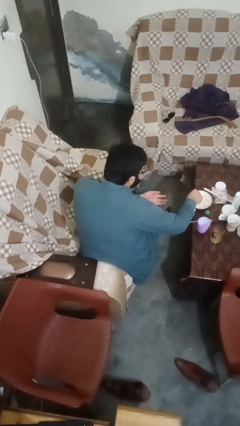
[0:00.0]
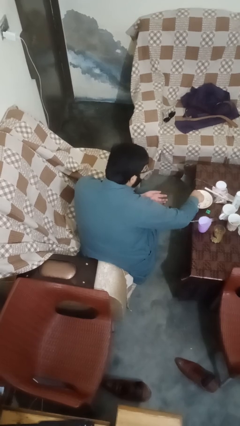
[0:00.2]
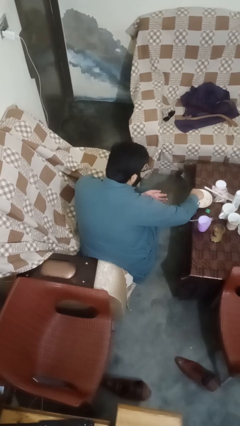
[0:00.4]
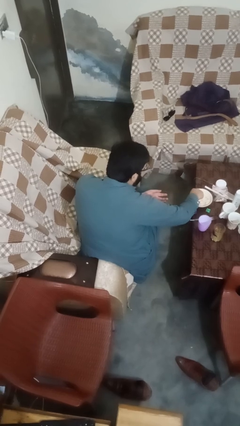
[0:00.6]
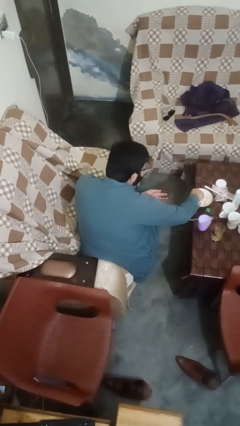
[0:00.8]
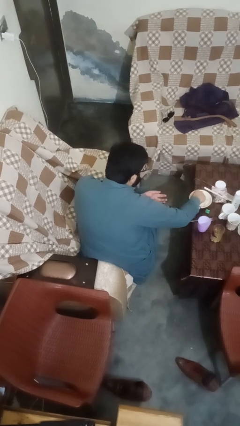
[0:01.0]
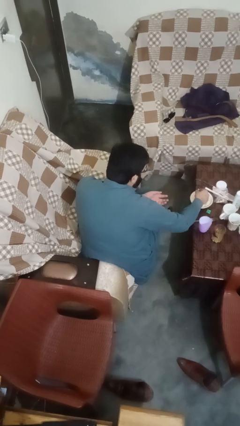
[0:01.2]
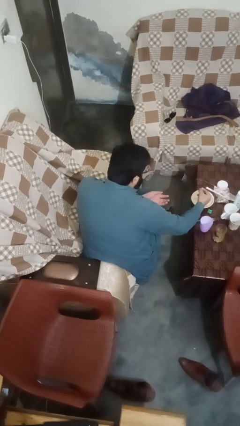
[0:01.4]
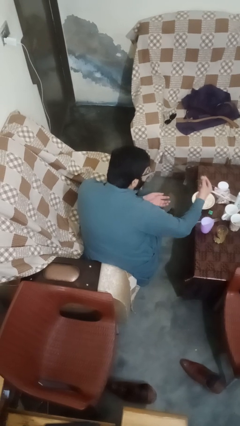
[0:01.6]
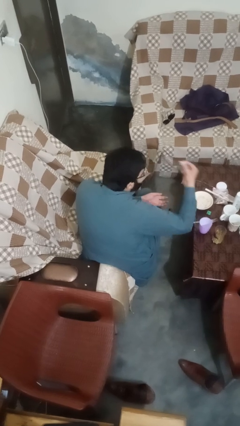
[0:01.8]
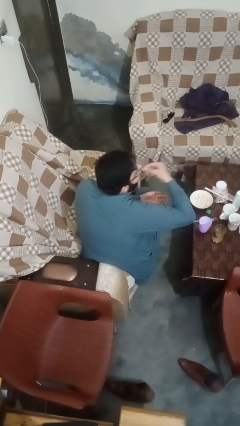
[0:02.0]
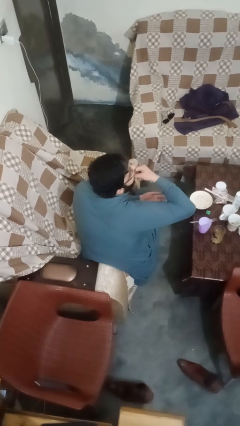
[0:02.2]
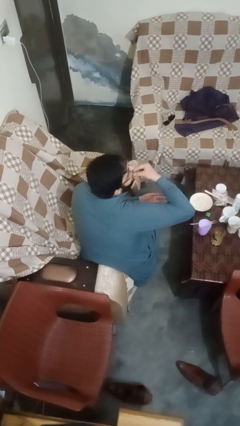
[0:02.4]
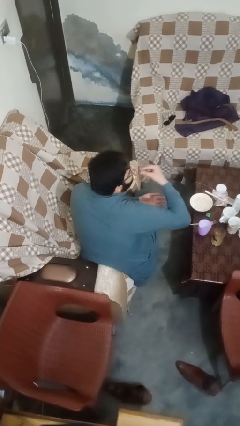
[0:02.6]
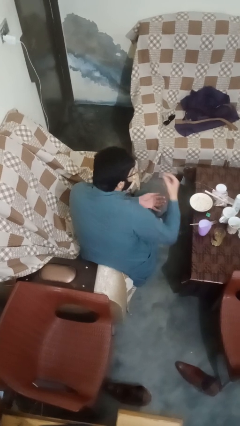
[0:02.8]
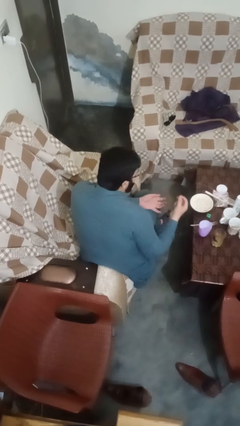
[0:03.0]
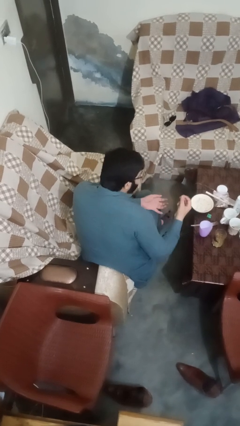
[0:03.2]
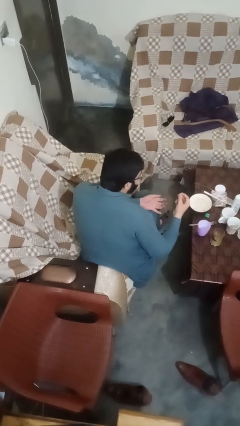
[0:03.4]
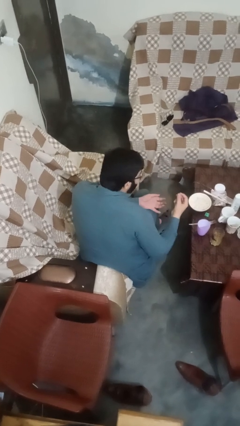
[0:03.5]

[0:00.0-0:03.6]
person eats with hands

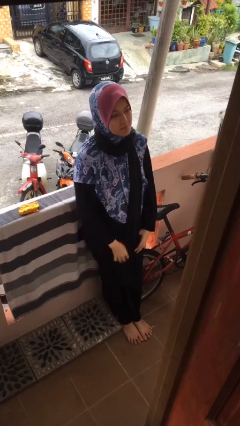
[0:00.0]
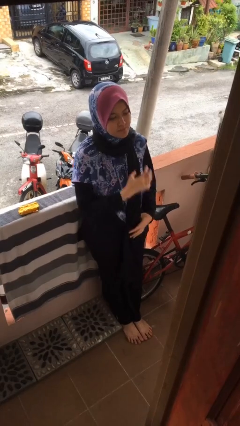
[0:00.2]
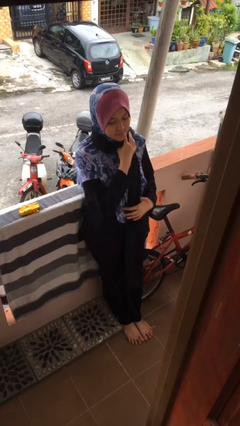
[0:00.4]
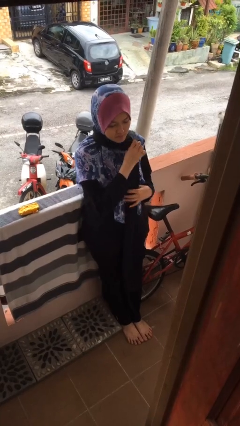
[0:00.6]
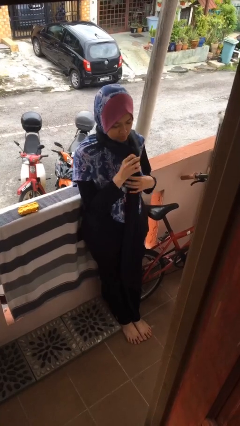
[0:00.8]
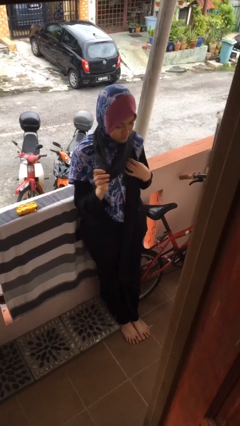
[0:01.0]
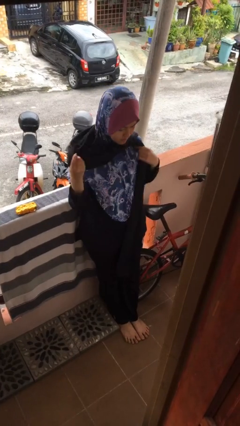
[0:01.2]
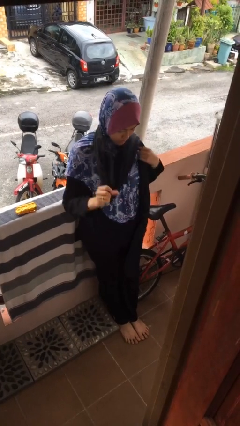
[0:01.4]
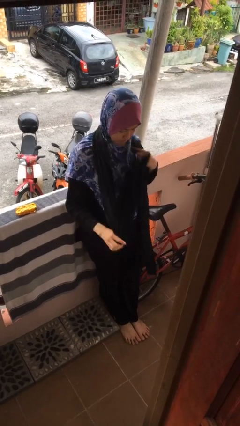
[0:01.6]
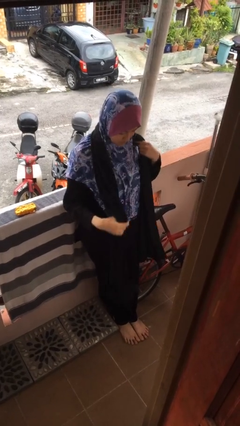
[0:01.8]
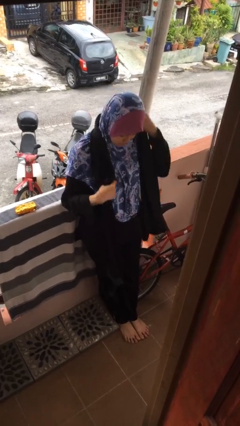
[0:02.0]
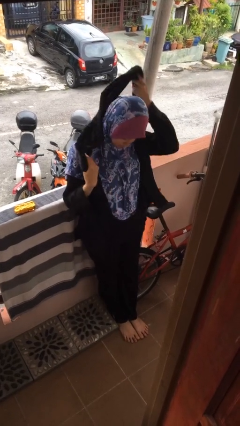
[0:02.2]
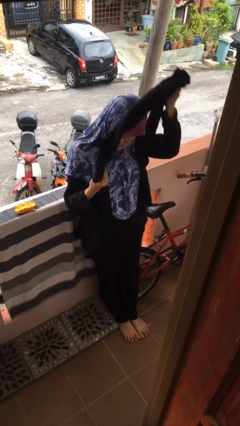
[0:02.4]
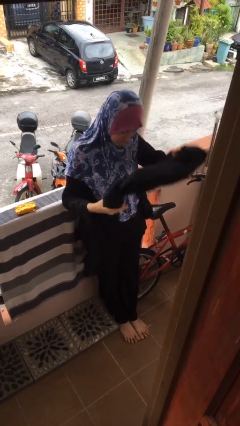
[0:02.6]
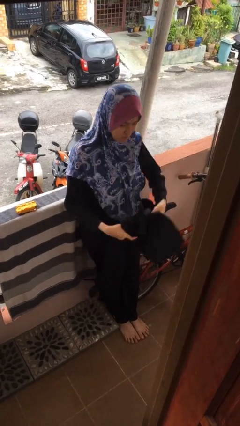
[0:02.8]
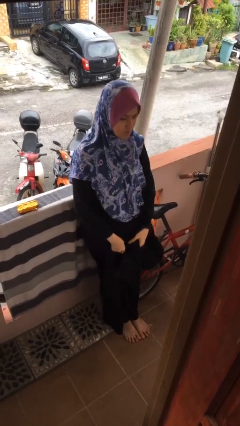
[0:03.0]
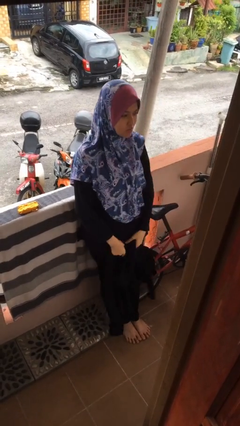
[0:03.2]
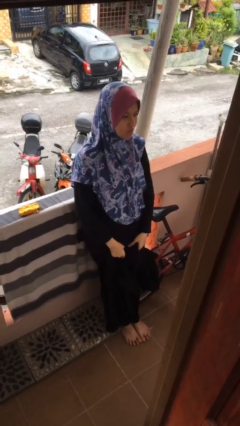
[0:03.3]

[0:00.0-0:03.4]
person takes off scarf

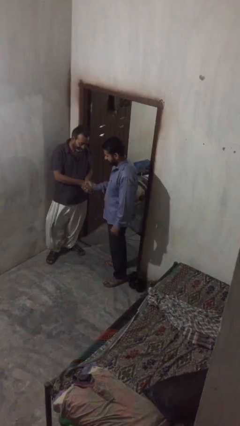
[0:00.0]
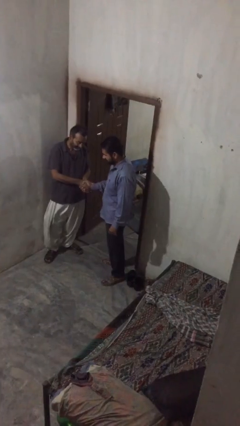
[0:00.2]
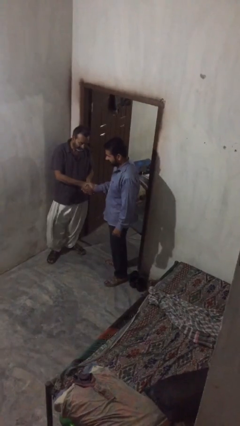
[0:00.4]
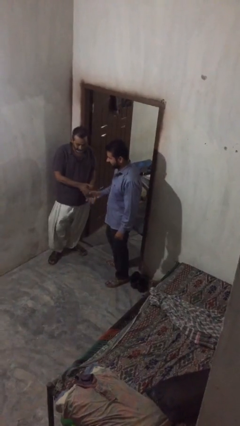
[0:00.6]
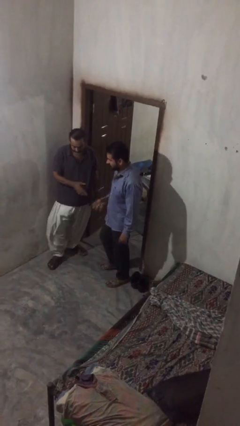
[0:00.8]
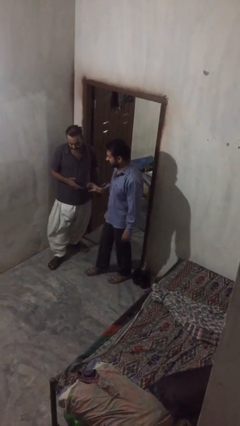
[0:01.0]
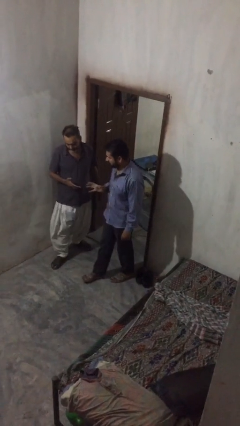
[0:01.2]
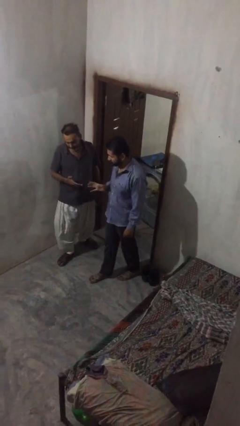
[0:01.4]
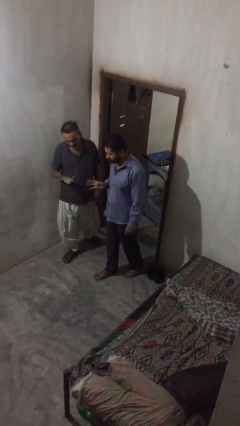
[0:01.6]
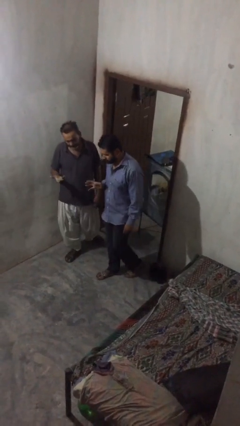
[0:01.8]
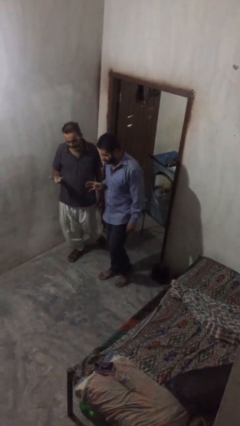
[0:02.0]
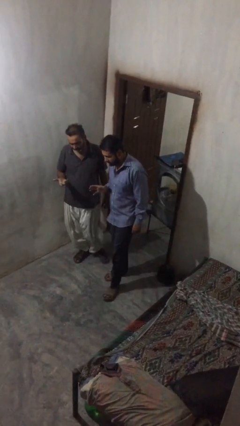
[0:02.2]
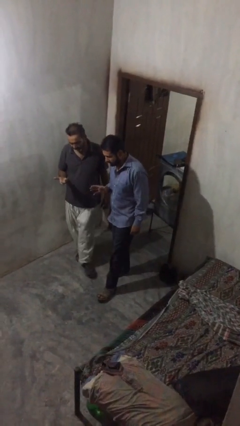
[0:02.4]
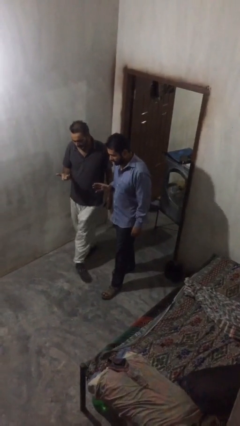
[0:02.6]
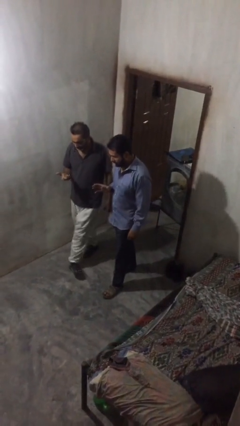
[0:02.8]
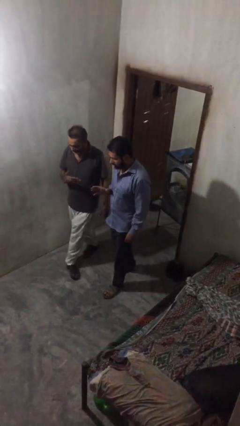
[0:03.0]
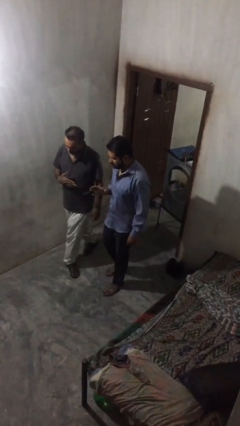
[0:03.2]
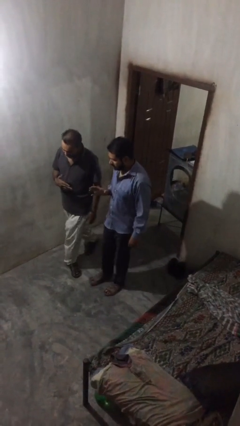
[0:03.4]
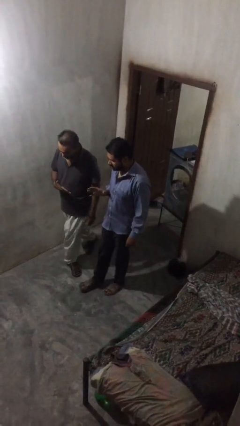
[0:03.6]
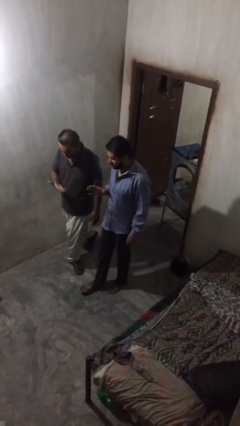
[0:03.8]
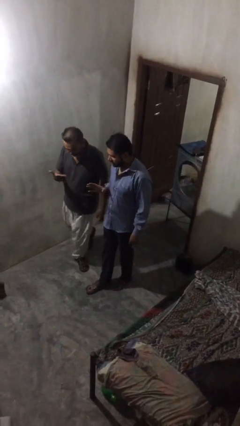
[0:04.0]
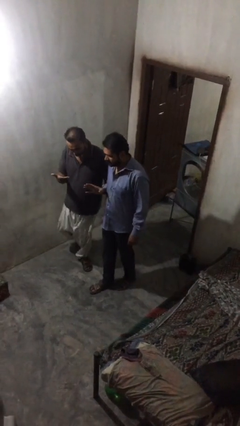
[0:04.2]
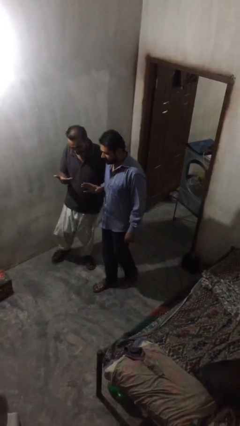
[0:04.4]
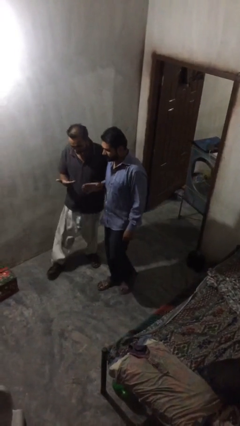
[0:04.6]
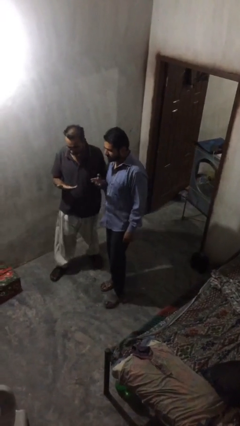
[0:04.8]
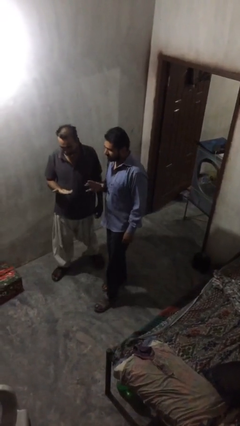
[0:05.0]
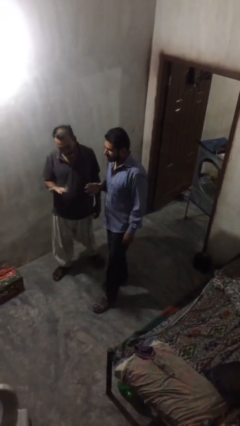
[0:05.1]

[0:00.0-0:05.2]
person talks to person

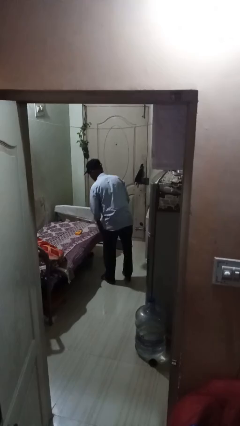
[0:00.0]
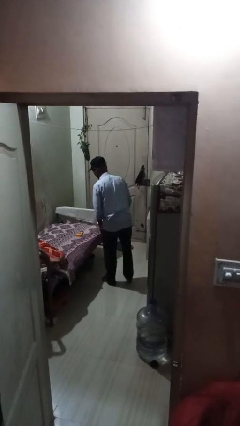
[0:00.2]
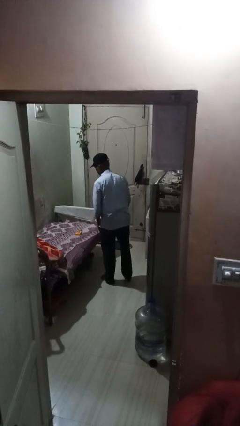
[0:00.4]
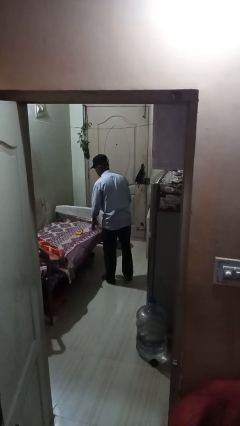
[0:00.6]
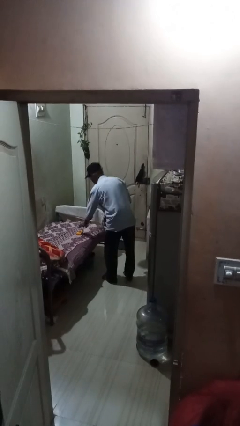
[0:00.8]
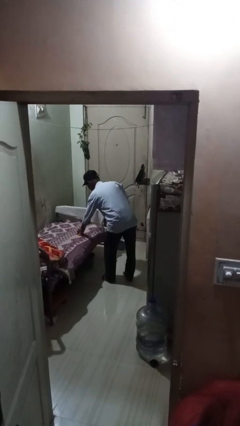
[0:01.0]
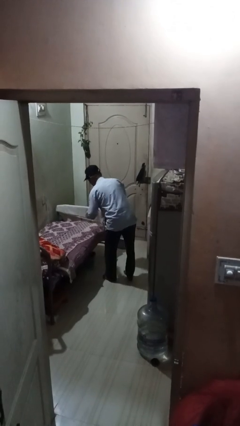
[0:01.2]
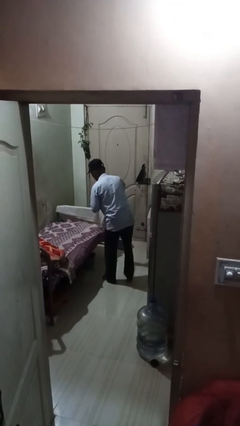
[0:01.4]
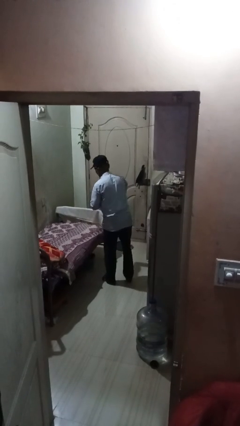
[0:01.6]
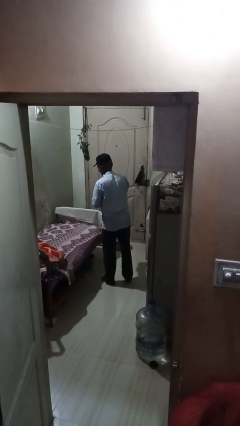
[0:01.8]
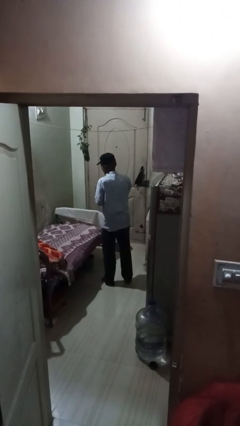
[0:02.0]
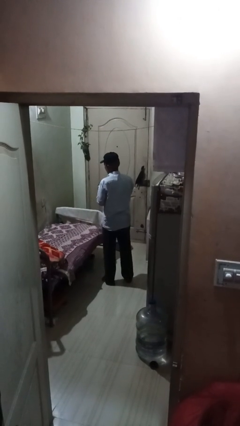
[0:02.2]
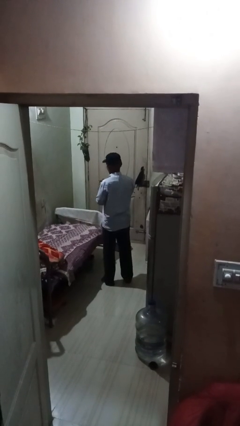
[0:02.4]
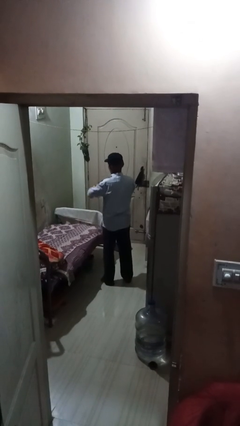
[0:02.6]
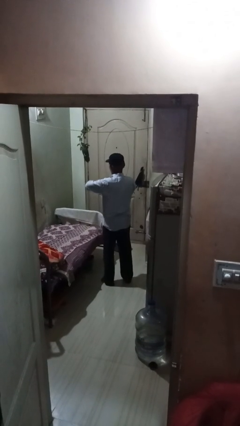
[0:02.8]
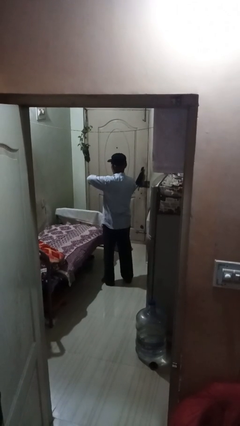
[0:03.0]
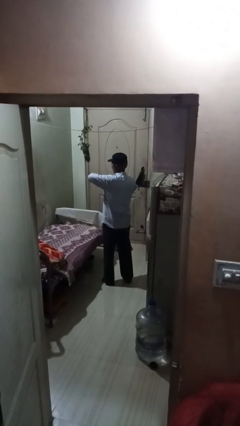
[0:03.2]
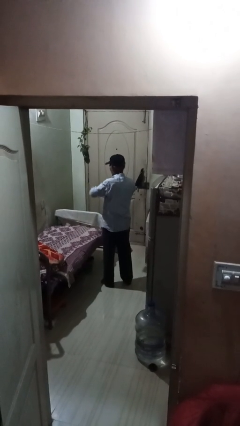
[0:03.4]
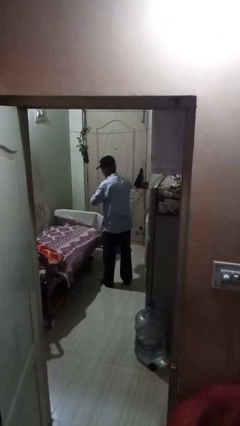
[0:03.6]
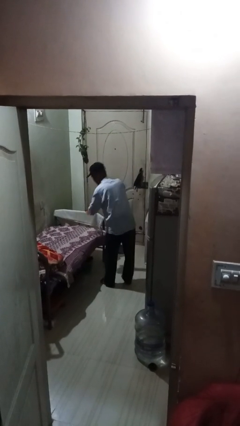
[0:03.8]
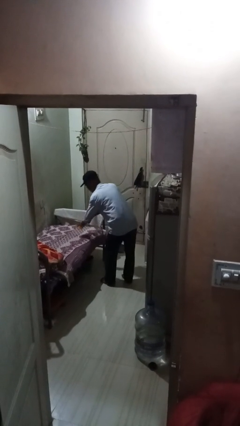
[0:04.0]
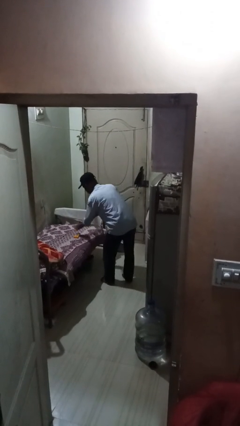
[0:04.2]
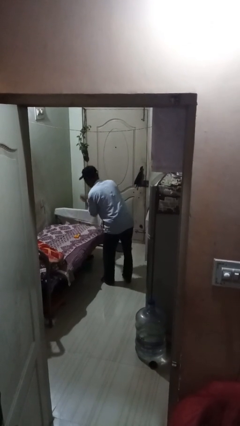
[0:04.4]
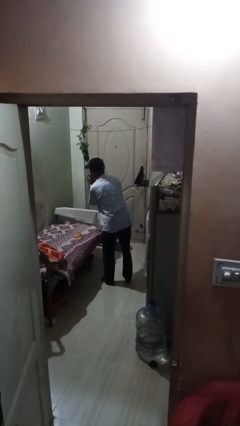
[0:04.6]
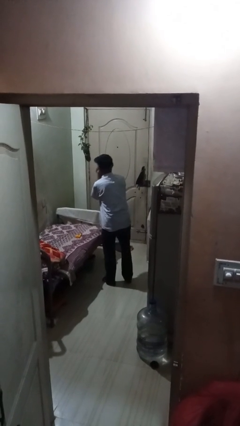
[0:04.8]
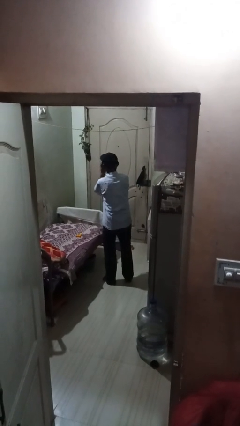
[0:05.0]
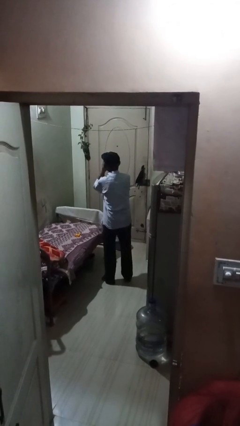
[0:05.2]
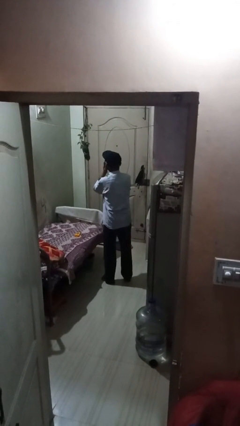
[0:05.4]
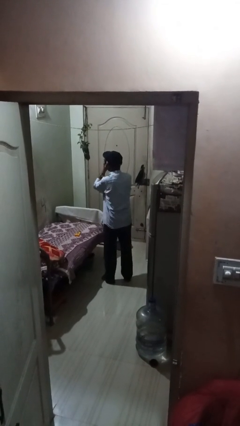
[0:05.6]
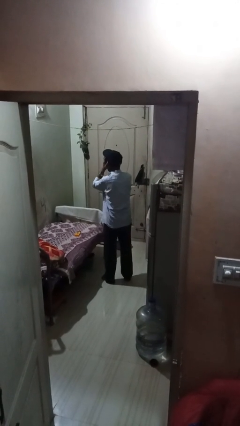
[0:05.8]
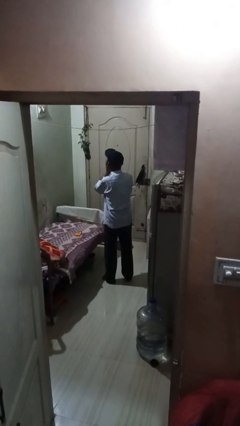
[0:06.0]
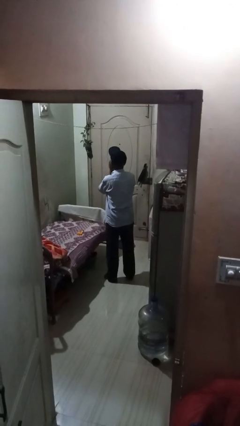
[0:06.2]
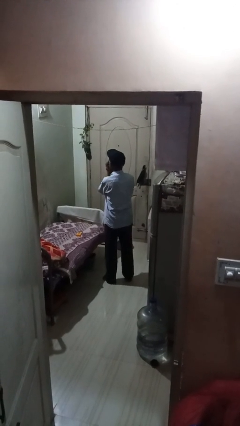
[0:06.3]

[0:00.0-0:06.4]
person applies sunscreen
